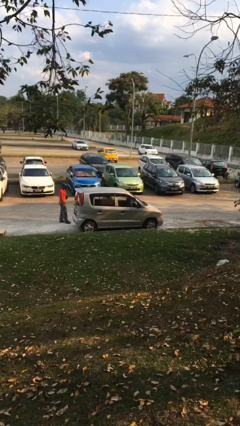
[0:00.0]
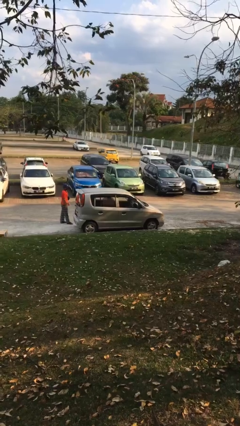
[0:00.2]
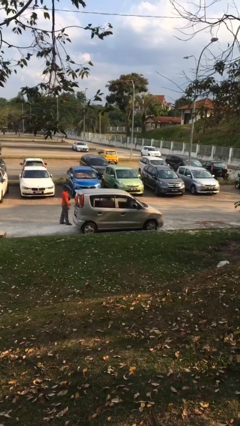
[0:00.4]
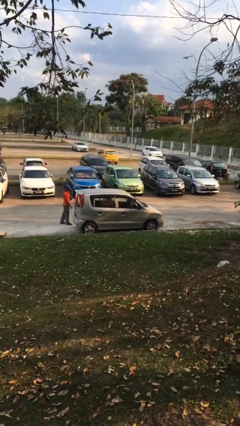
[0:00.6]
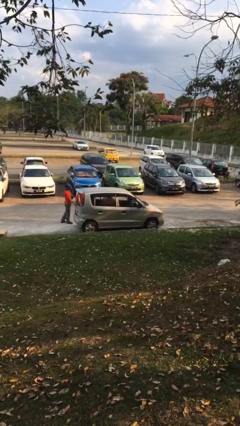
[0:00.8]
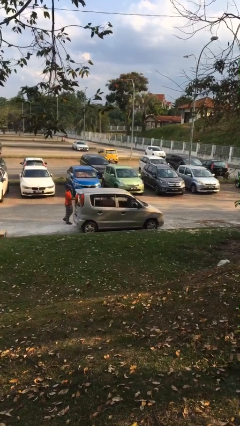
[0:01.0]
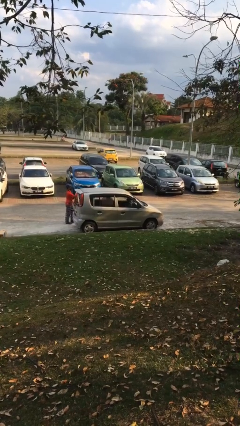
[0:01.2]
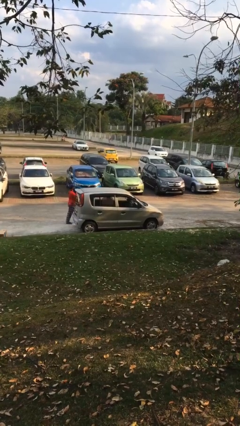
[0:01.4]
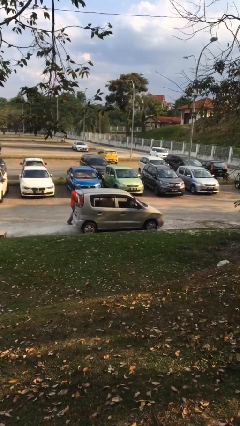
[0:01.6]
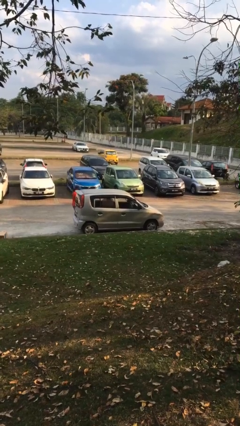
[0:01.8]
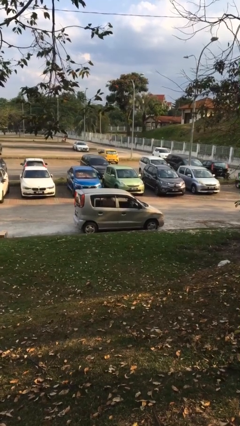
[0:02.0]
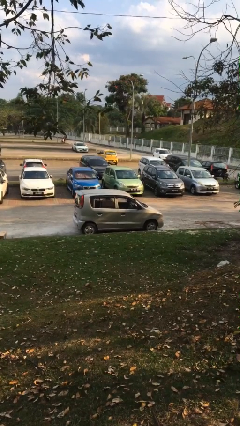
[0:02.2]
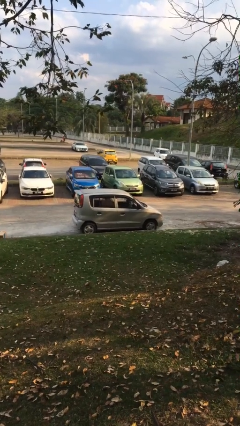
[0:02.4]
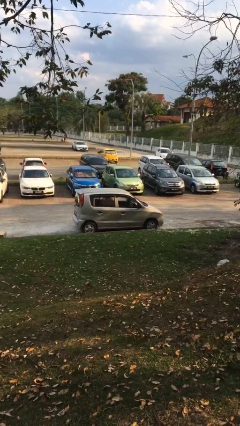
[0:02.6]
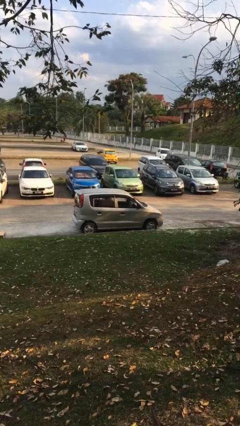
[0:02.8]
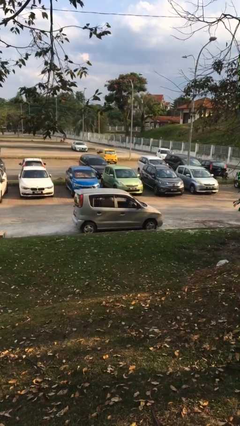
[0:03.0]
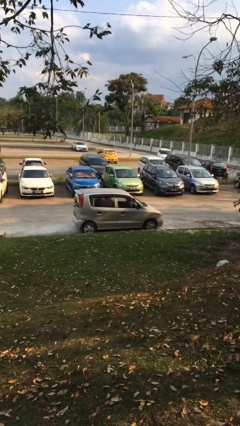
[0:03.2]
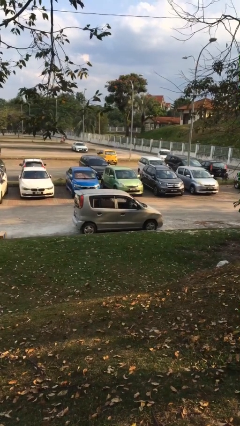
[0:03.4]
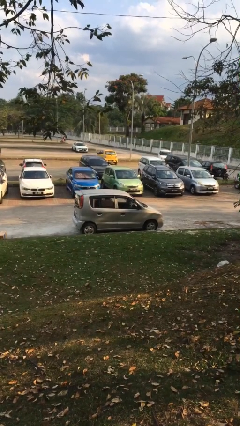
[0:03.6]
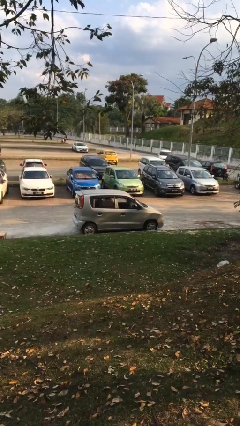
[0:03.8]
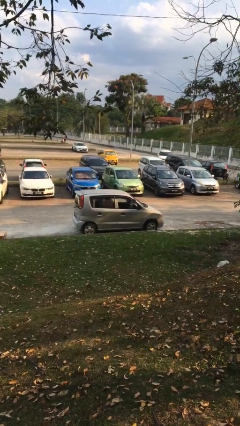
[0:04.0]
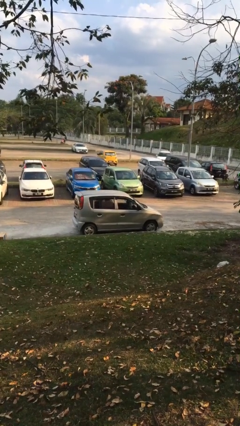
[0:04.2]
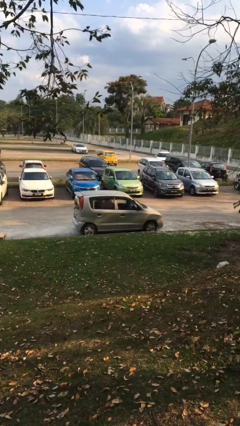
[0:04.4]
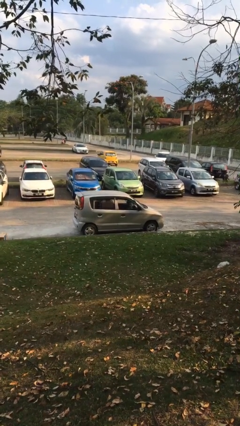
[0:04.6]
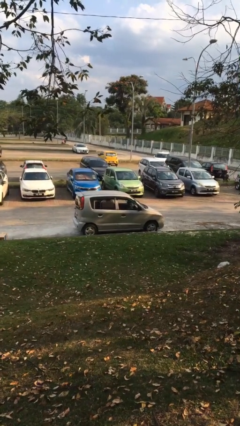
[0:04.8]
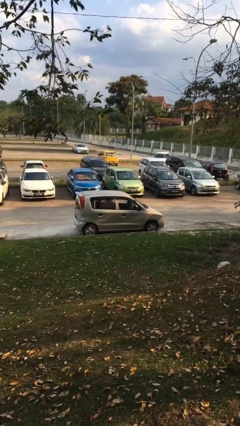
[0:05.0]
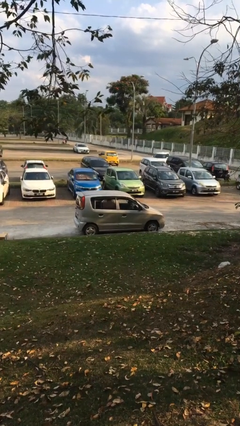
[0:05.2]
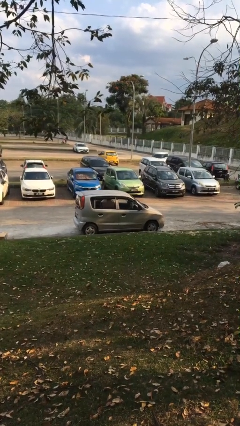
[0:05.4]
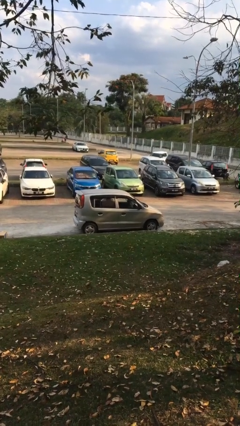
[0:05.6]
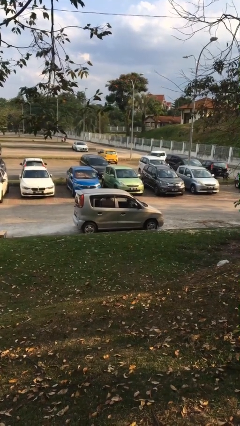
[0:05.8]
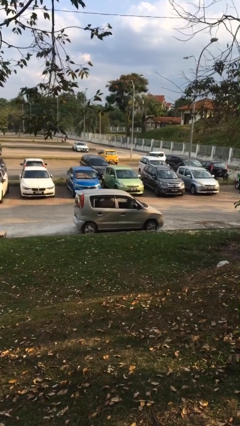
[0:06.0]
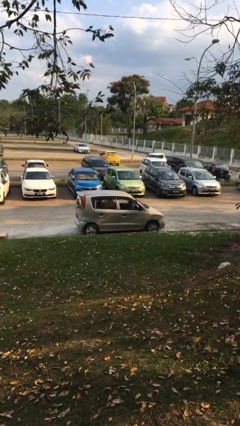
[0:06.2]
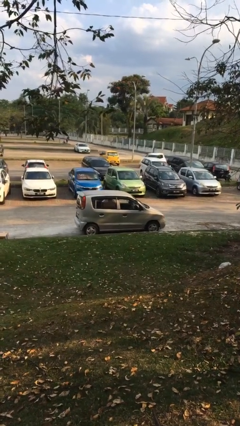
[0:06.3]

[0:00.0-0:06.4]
car picks up person

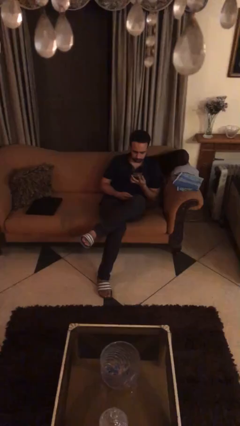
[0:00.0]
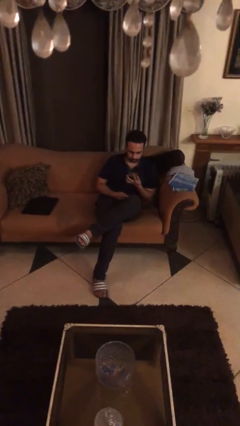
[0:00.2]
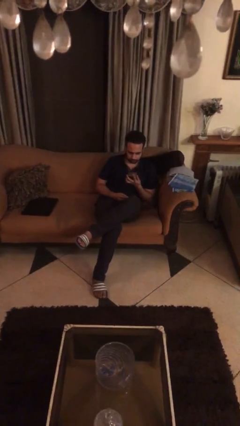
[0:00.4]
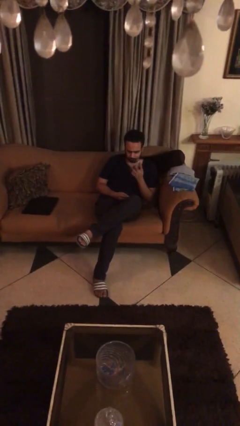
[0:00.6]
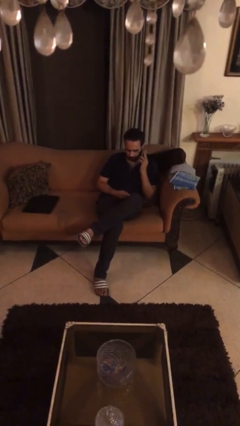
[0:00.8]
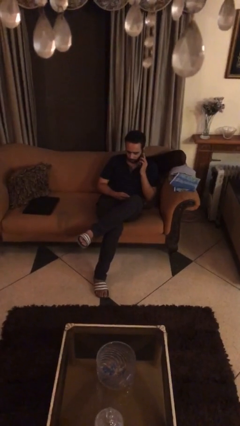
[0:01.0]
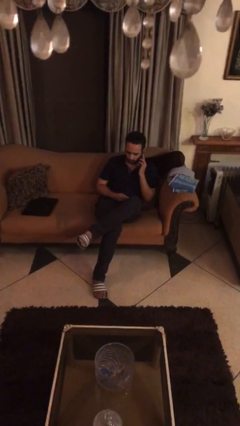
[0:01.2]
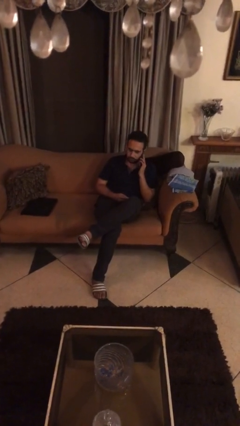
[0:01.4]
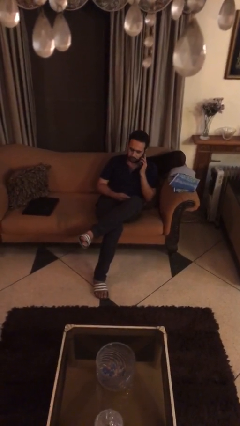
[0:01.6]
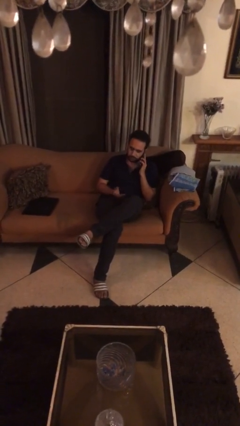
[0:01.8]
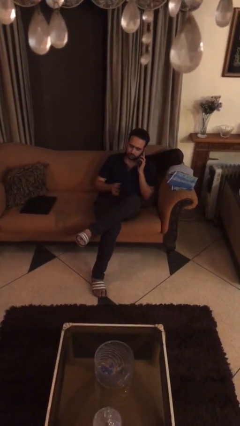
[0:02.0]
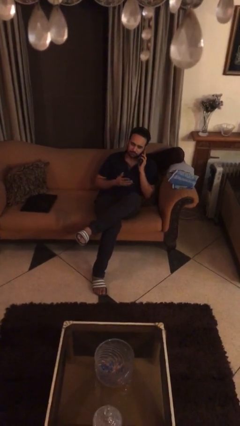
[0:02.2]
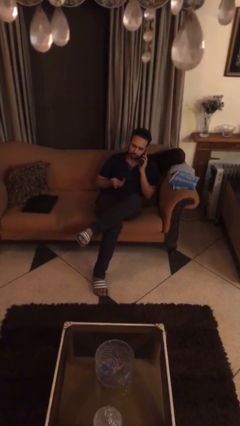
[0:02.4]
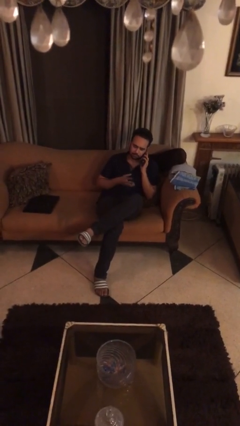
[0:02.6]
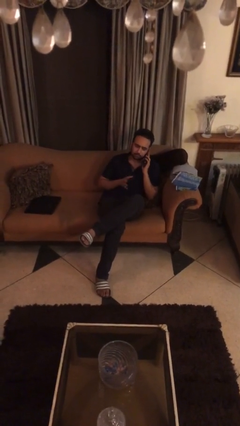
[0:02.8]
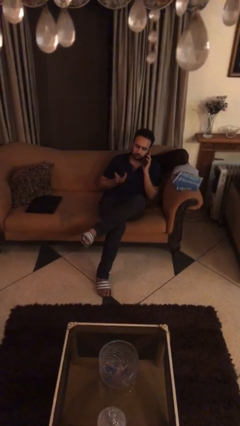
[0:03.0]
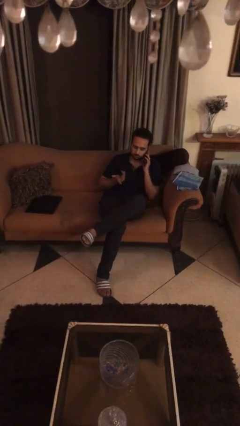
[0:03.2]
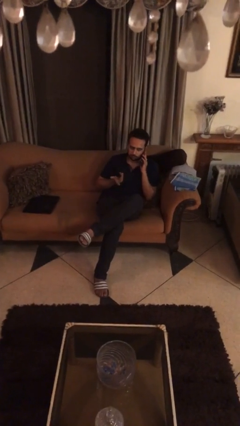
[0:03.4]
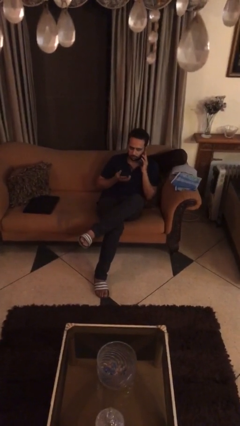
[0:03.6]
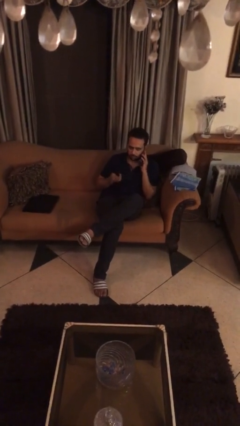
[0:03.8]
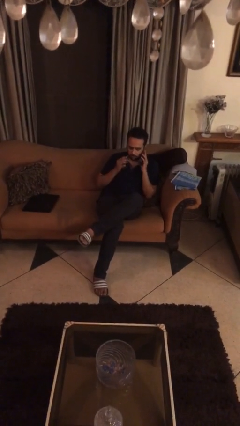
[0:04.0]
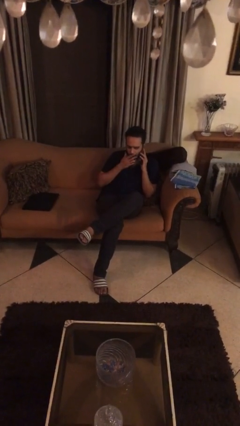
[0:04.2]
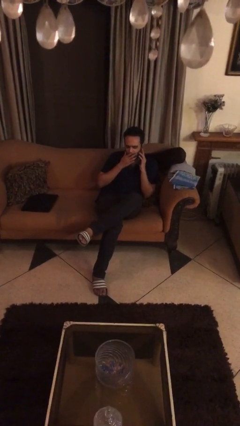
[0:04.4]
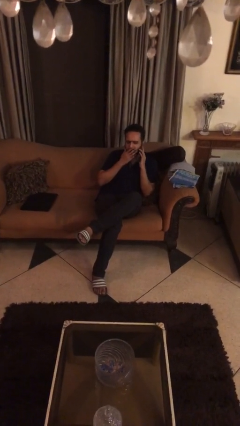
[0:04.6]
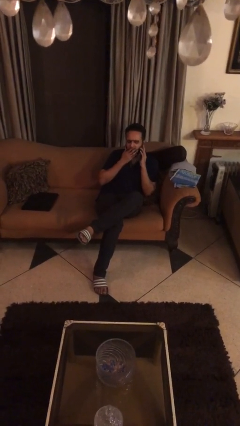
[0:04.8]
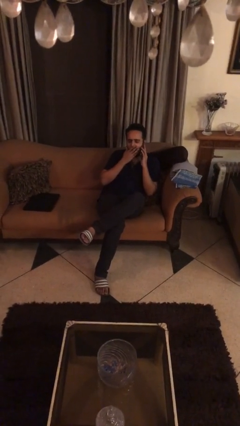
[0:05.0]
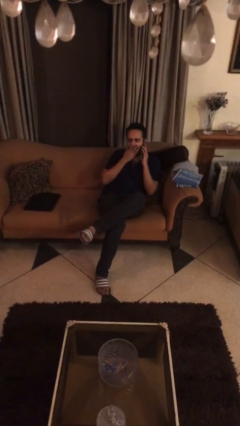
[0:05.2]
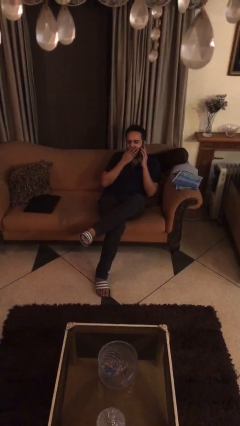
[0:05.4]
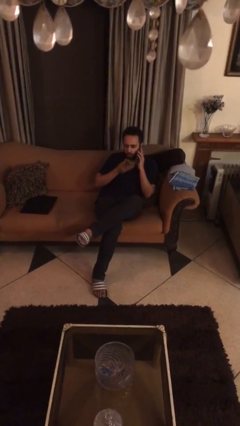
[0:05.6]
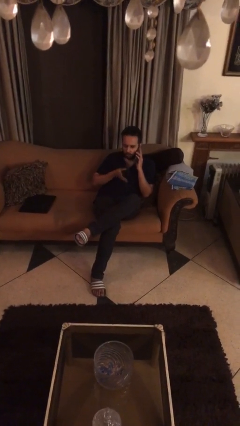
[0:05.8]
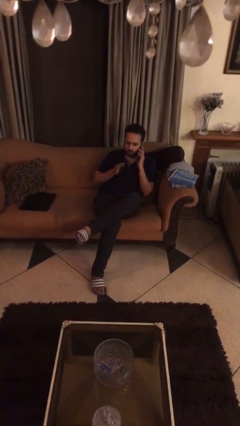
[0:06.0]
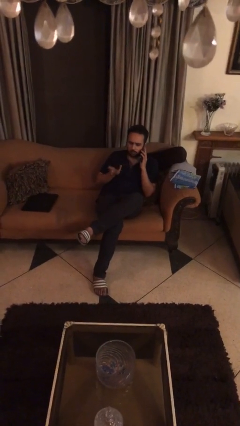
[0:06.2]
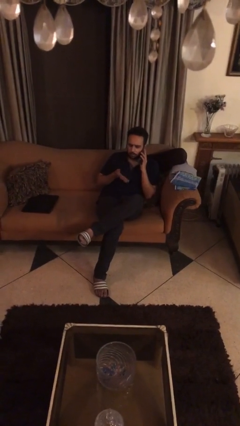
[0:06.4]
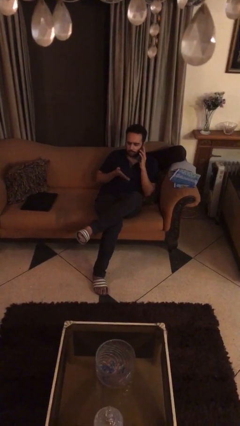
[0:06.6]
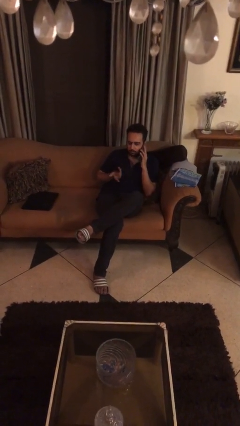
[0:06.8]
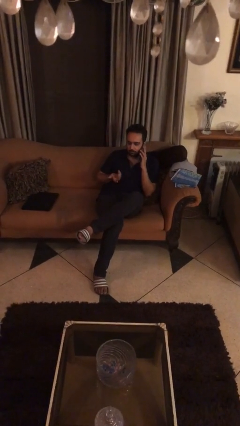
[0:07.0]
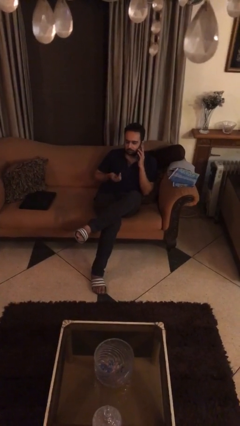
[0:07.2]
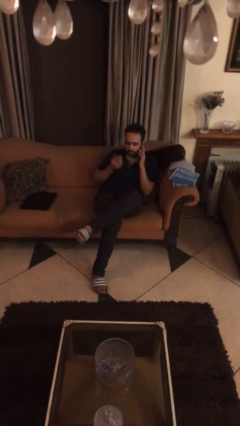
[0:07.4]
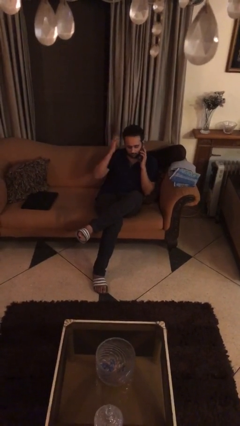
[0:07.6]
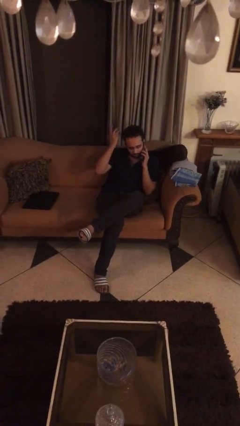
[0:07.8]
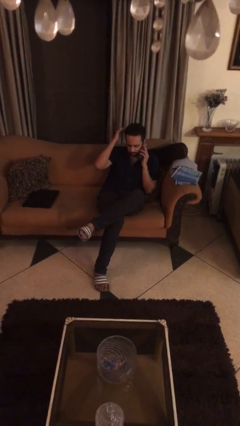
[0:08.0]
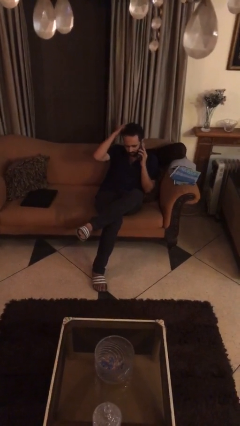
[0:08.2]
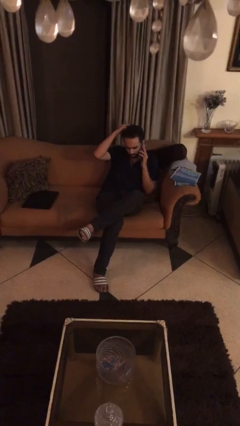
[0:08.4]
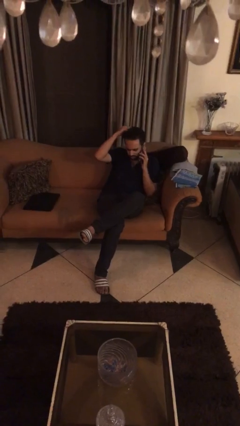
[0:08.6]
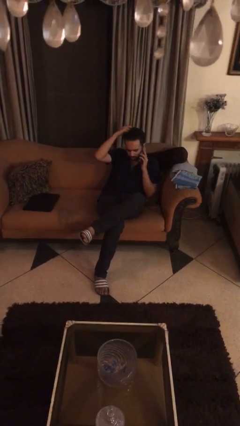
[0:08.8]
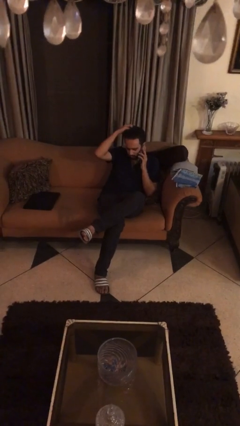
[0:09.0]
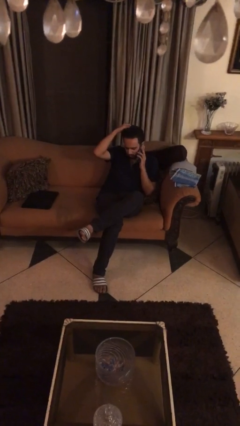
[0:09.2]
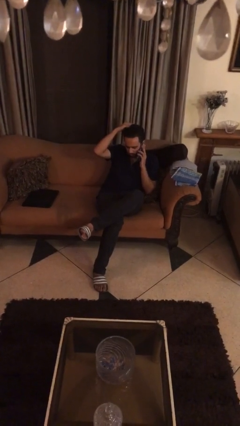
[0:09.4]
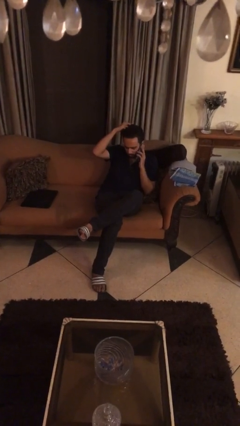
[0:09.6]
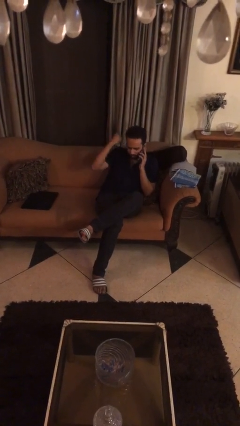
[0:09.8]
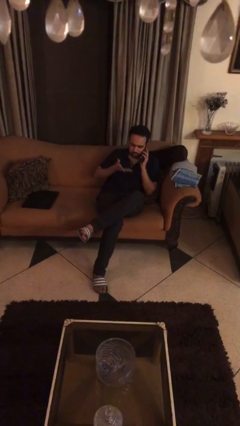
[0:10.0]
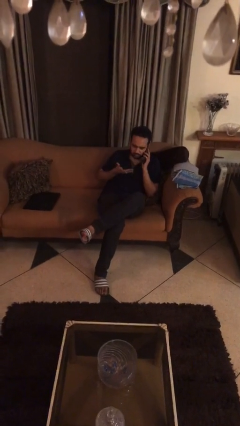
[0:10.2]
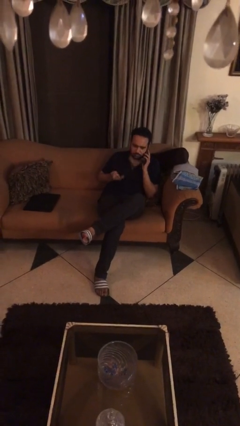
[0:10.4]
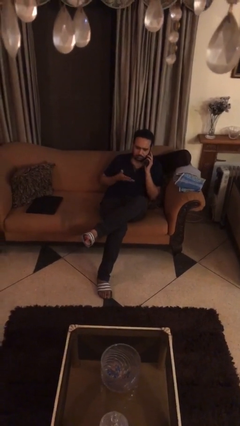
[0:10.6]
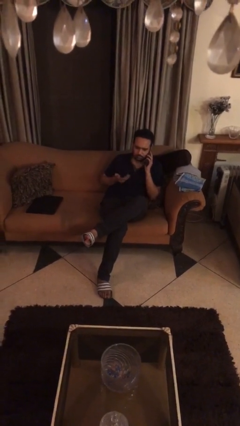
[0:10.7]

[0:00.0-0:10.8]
person talks on phone

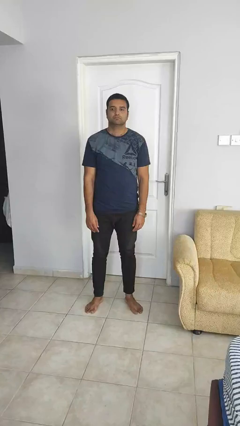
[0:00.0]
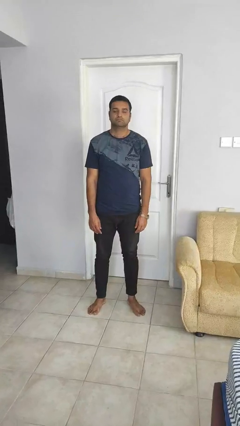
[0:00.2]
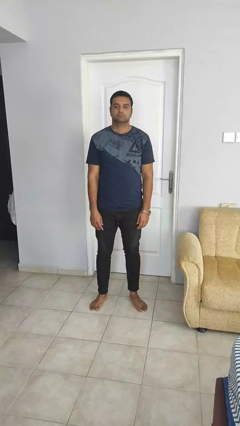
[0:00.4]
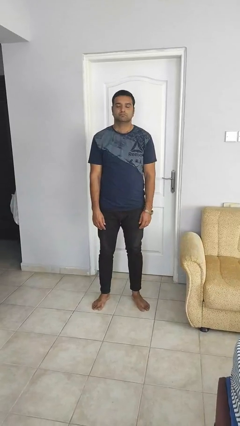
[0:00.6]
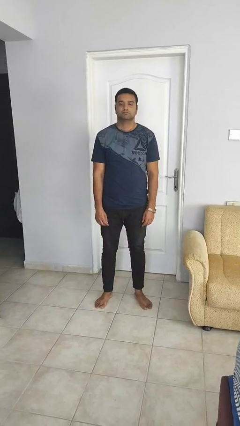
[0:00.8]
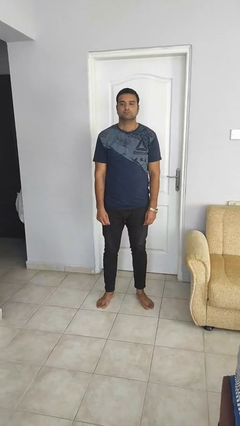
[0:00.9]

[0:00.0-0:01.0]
person sits crisscross
